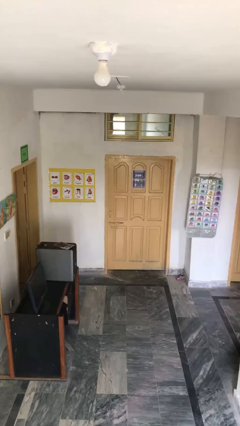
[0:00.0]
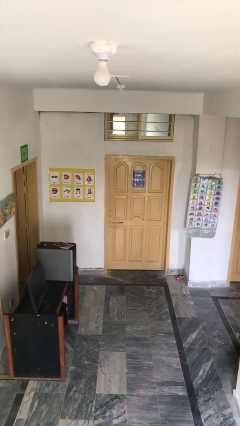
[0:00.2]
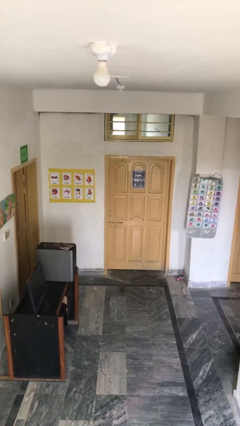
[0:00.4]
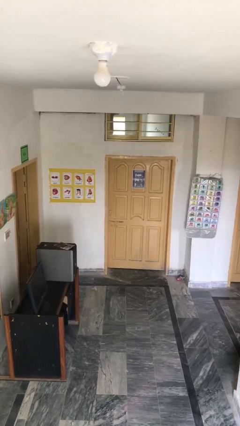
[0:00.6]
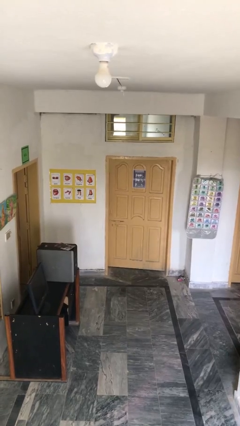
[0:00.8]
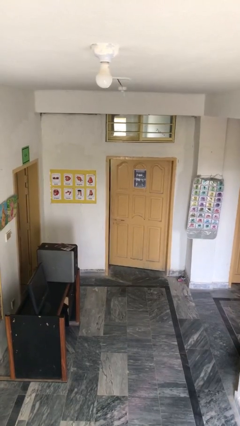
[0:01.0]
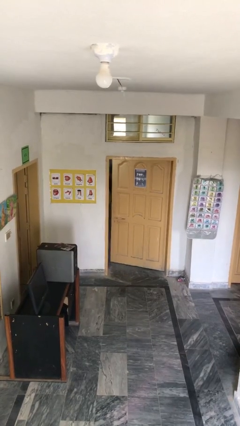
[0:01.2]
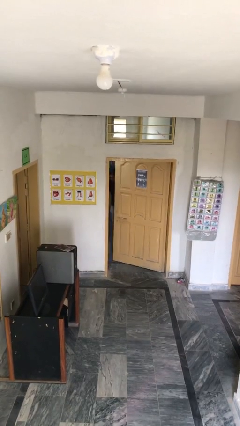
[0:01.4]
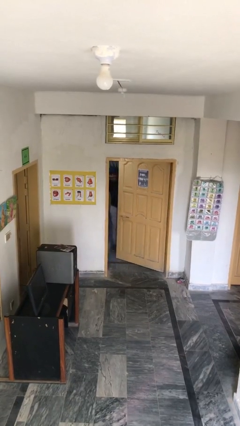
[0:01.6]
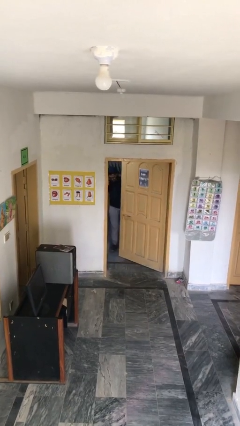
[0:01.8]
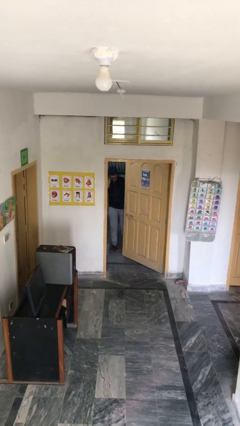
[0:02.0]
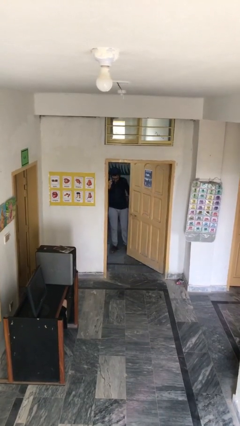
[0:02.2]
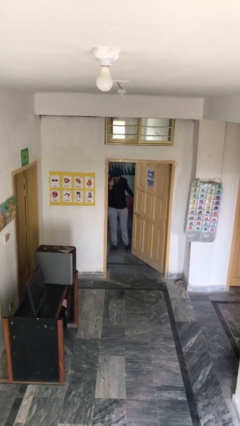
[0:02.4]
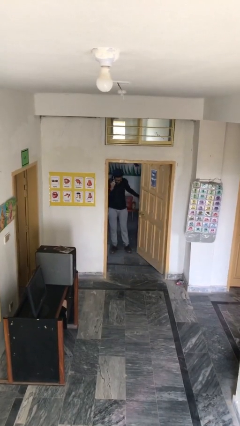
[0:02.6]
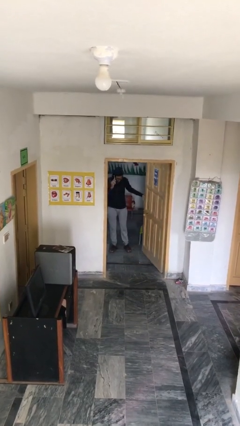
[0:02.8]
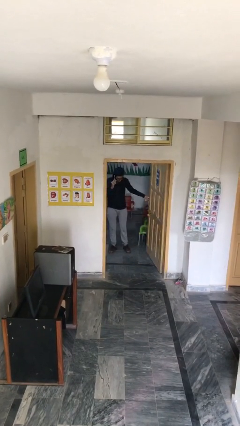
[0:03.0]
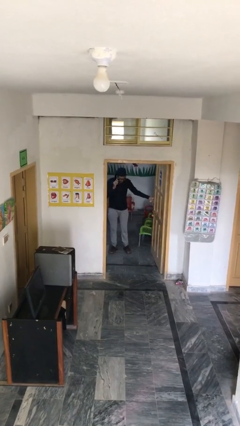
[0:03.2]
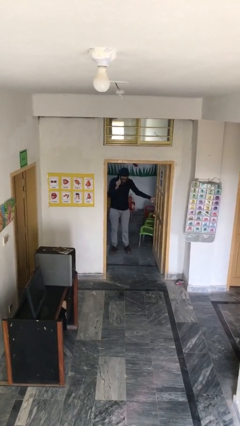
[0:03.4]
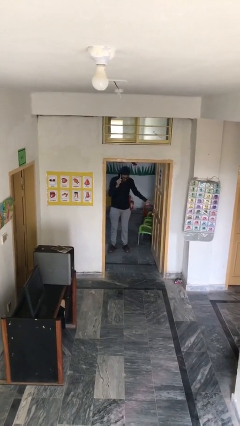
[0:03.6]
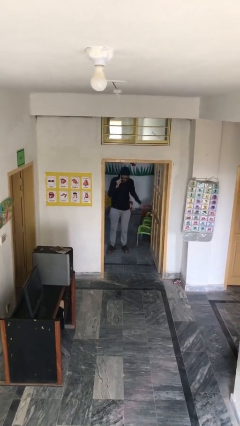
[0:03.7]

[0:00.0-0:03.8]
person opens facility door

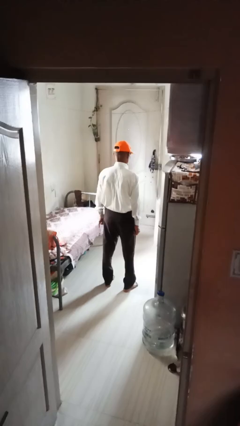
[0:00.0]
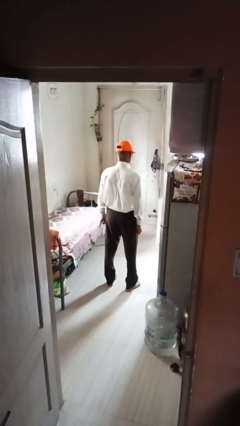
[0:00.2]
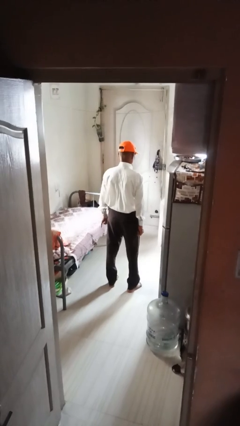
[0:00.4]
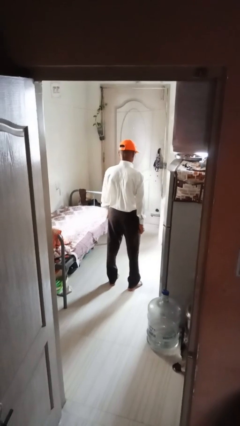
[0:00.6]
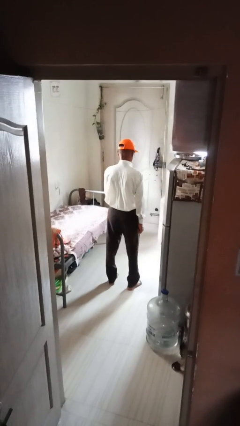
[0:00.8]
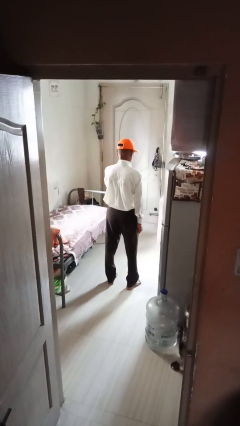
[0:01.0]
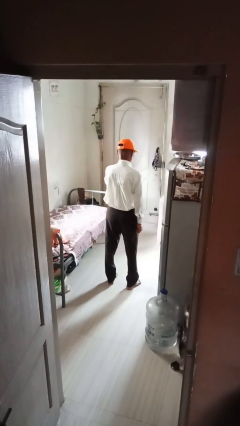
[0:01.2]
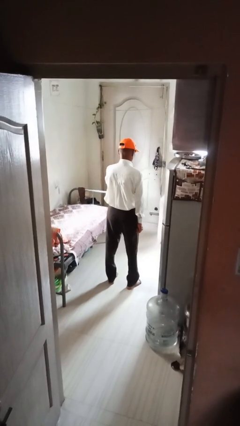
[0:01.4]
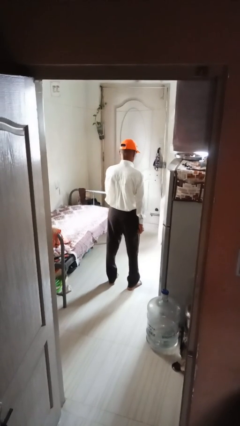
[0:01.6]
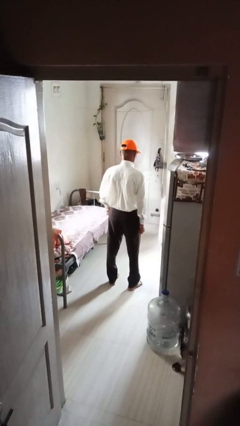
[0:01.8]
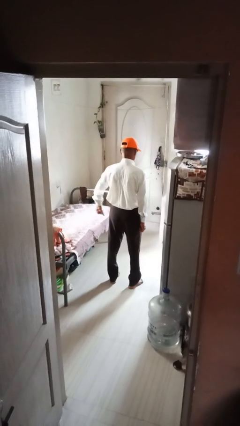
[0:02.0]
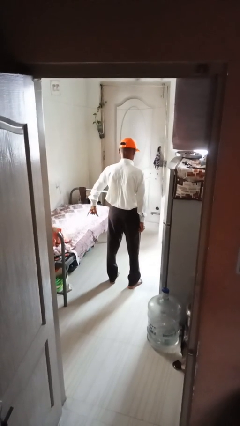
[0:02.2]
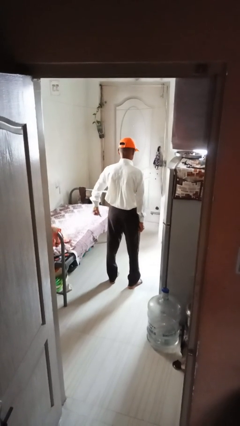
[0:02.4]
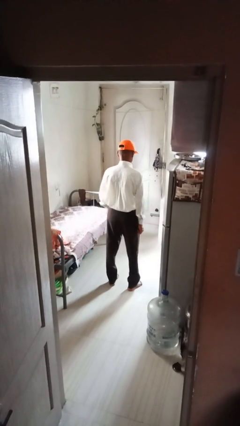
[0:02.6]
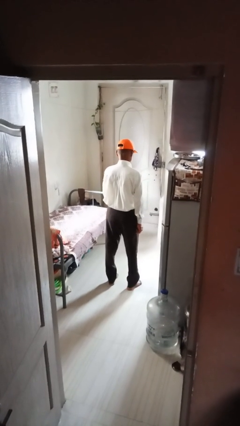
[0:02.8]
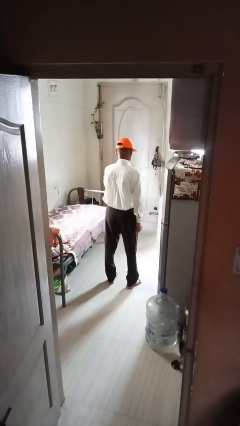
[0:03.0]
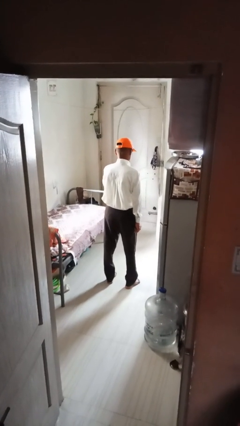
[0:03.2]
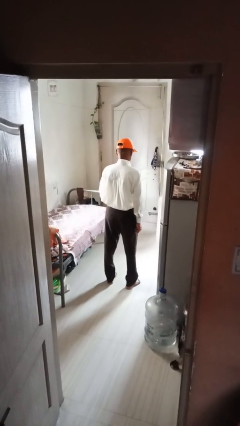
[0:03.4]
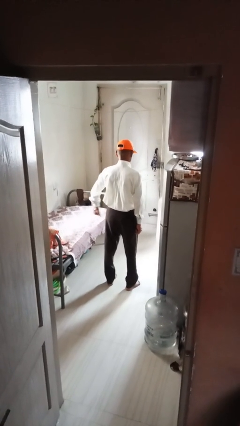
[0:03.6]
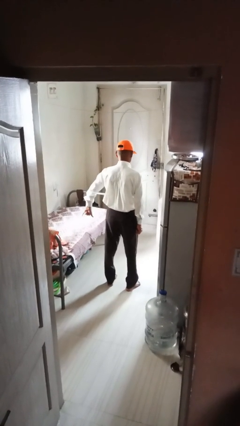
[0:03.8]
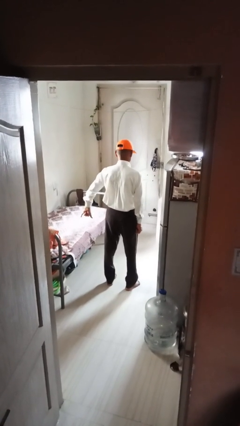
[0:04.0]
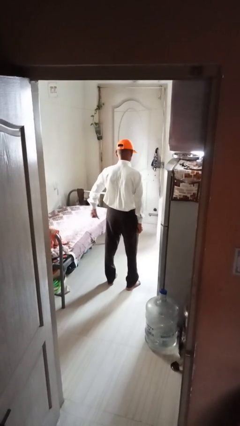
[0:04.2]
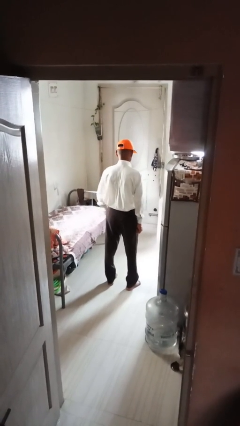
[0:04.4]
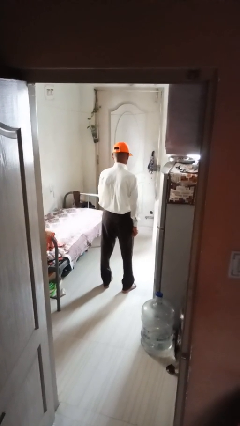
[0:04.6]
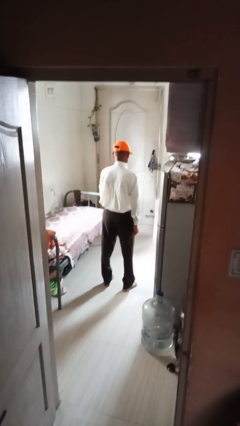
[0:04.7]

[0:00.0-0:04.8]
person gestures hang loose

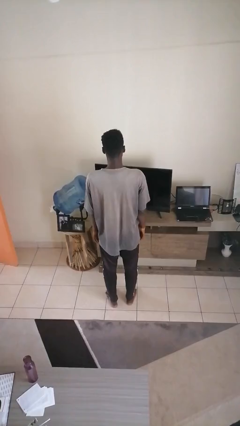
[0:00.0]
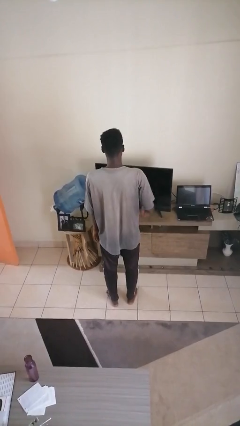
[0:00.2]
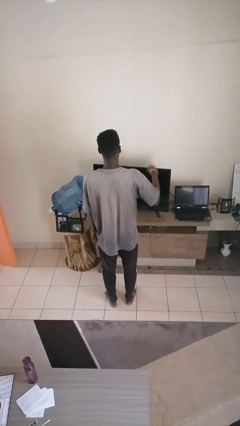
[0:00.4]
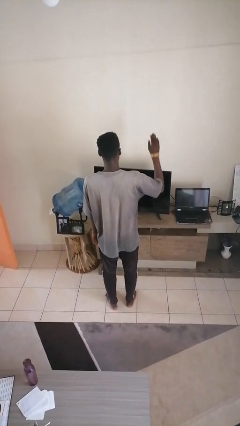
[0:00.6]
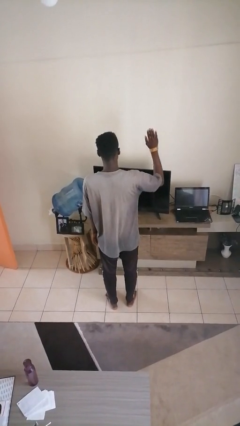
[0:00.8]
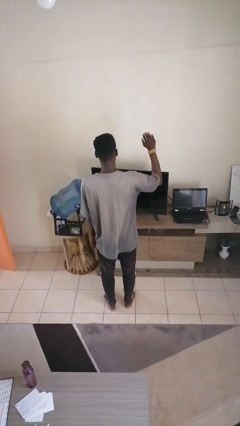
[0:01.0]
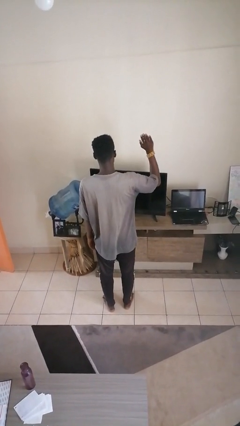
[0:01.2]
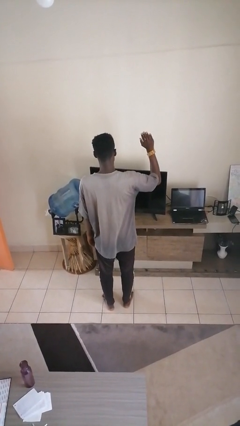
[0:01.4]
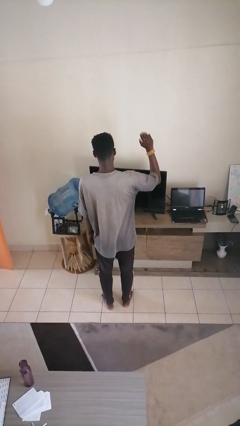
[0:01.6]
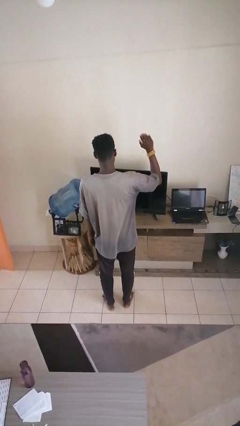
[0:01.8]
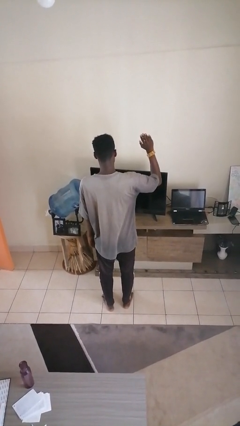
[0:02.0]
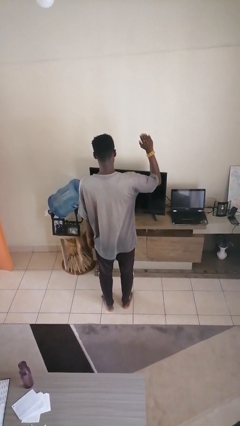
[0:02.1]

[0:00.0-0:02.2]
person gestures raise hand

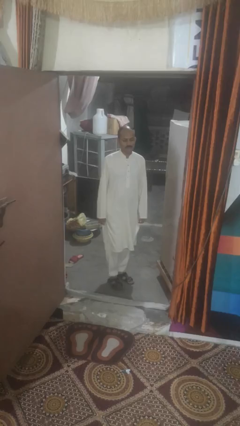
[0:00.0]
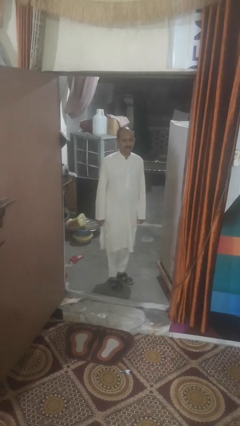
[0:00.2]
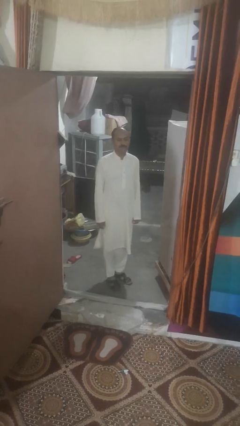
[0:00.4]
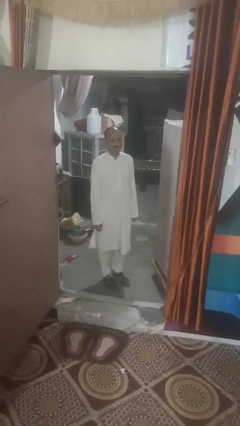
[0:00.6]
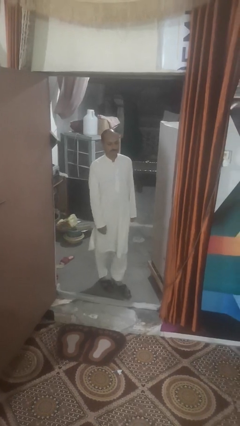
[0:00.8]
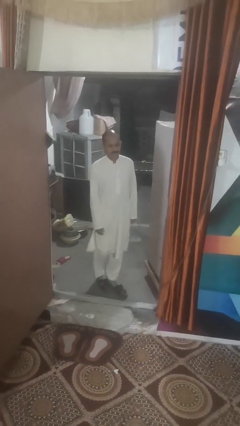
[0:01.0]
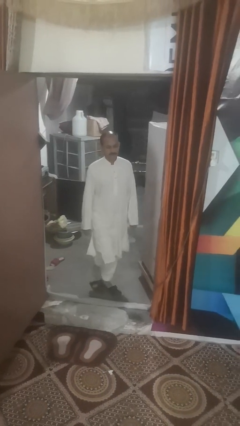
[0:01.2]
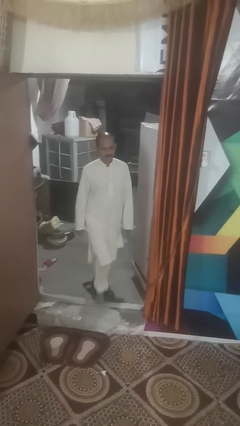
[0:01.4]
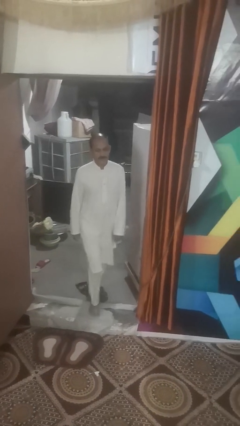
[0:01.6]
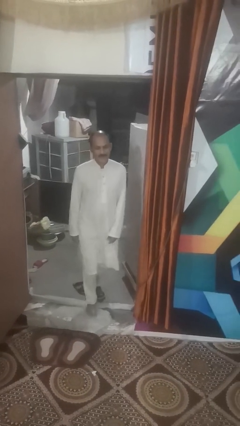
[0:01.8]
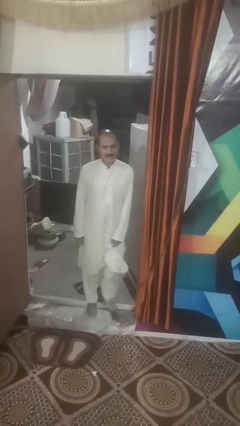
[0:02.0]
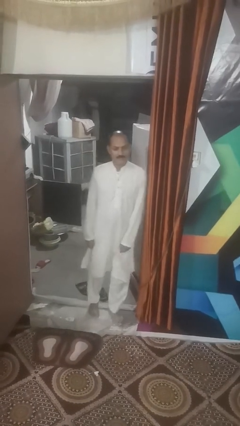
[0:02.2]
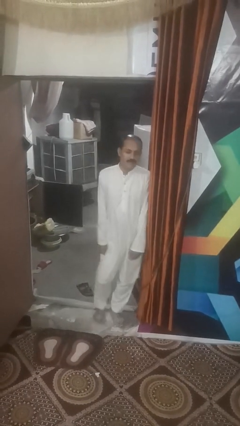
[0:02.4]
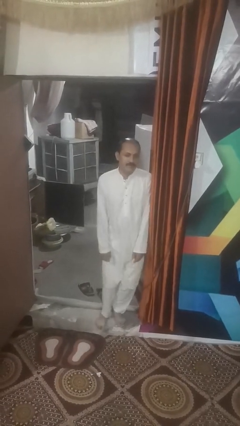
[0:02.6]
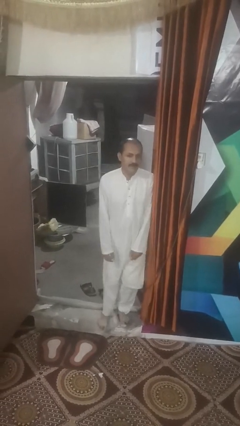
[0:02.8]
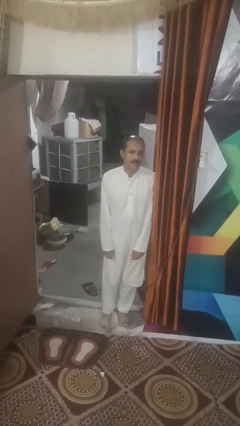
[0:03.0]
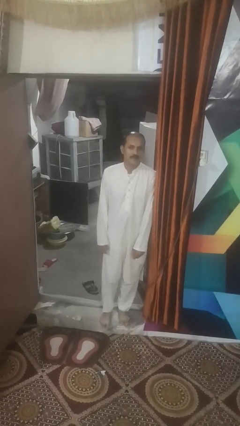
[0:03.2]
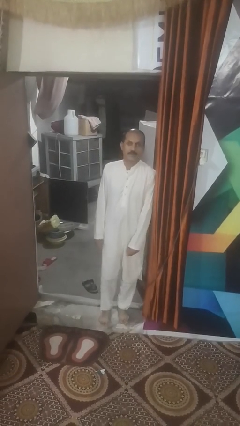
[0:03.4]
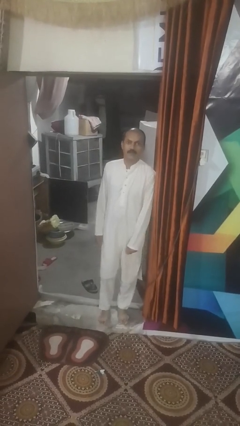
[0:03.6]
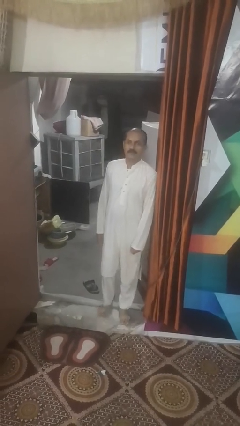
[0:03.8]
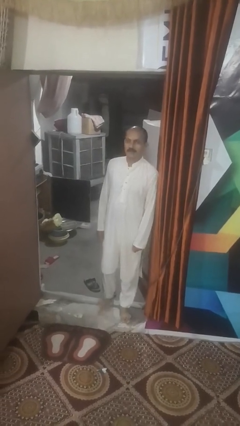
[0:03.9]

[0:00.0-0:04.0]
person bumps into wall

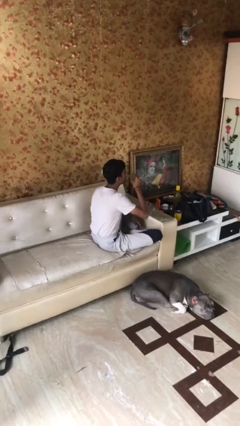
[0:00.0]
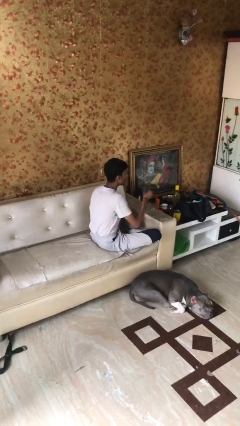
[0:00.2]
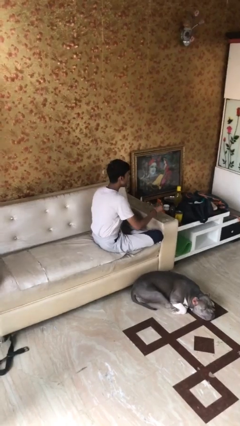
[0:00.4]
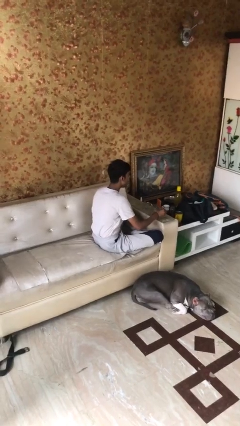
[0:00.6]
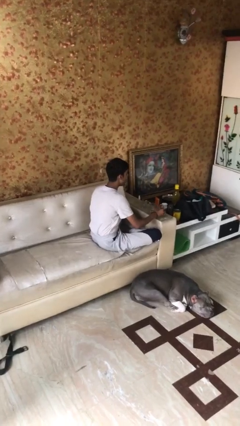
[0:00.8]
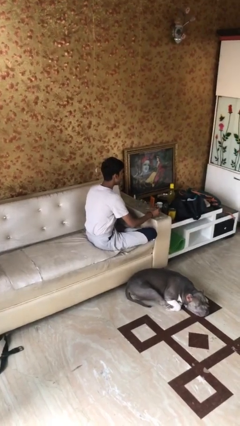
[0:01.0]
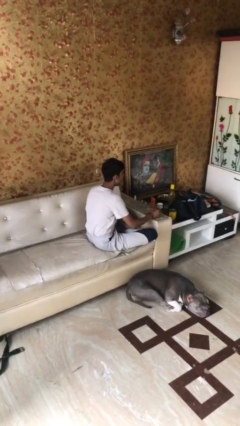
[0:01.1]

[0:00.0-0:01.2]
person puts down object on table

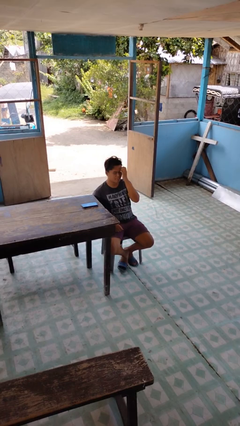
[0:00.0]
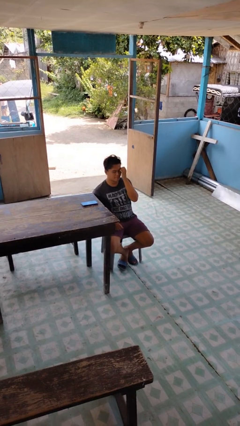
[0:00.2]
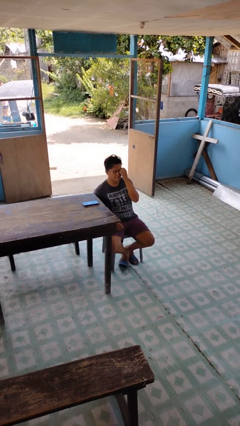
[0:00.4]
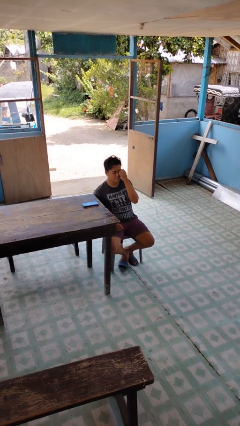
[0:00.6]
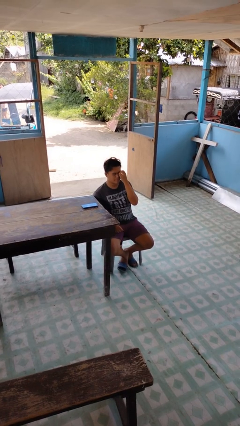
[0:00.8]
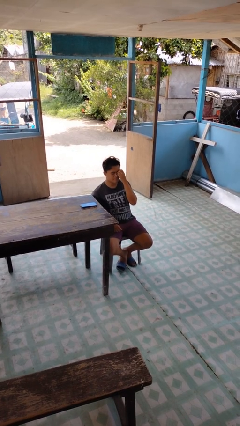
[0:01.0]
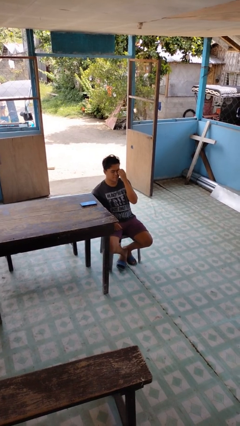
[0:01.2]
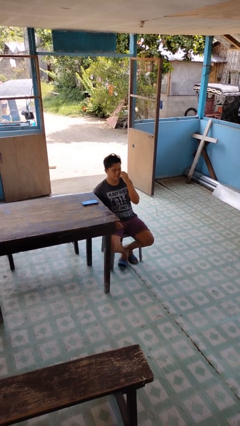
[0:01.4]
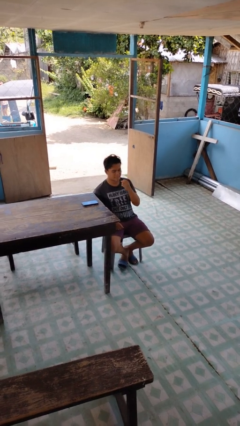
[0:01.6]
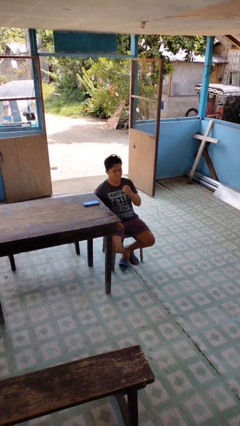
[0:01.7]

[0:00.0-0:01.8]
person scratches face
